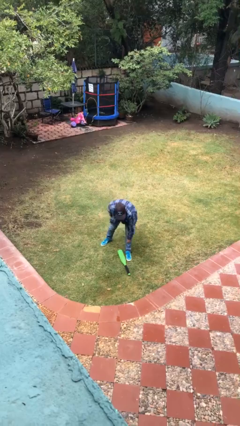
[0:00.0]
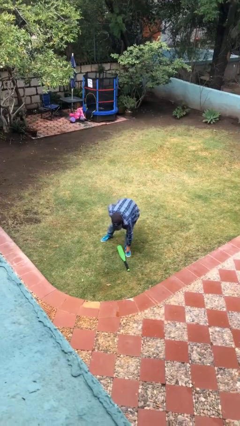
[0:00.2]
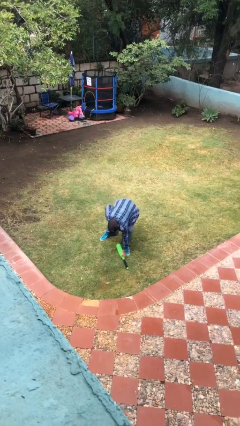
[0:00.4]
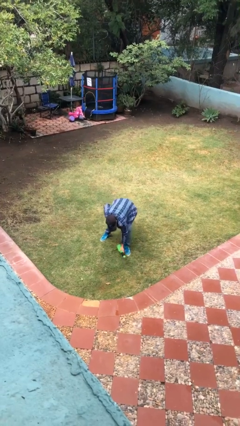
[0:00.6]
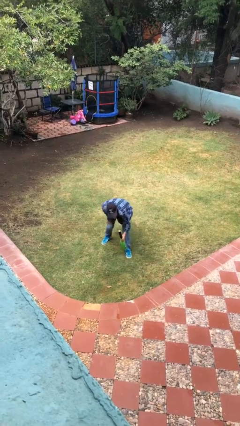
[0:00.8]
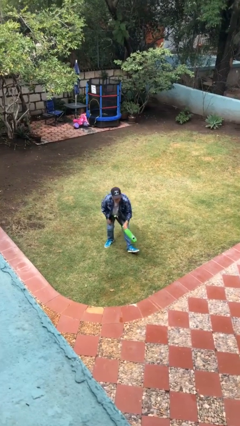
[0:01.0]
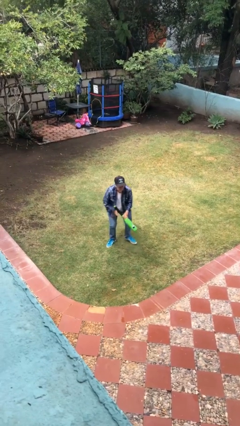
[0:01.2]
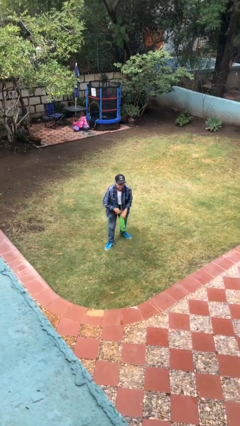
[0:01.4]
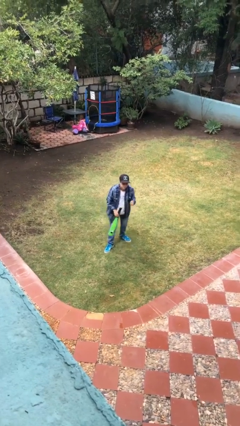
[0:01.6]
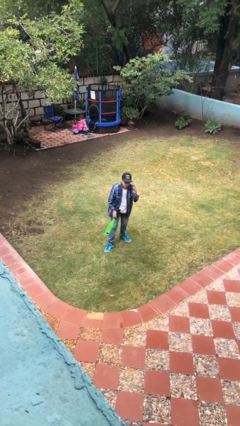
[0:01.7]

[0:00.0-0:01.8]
person picks up object from floor

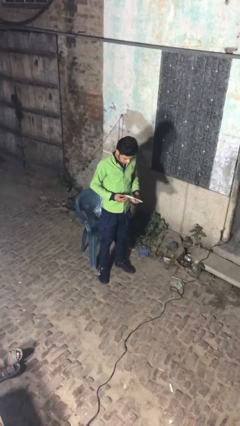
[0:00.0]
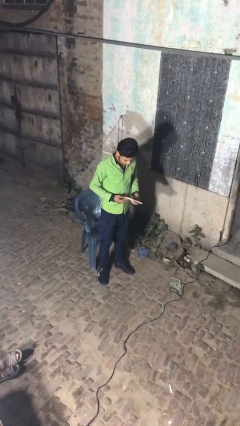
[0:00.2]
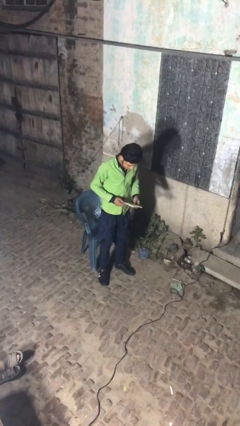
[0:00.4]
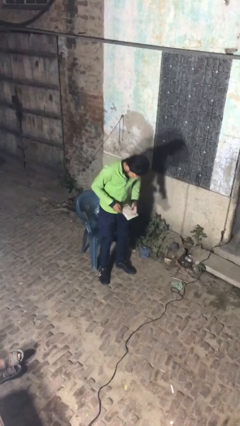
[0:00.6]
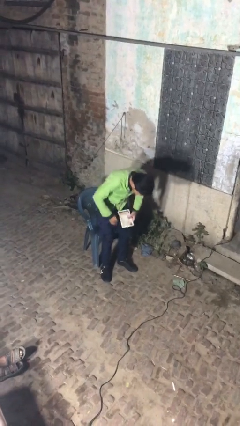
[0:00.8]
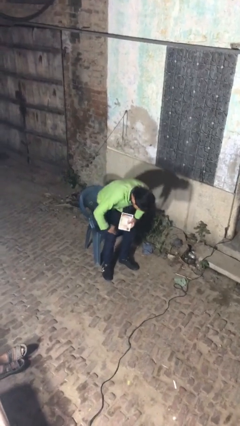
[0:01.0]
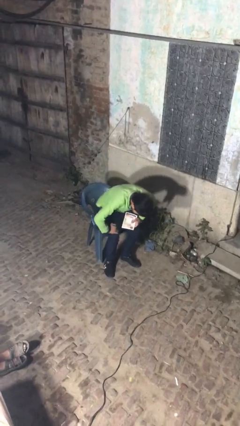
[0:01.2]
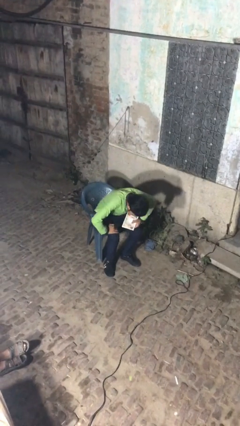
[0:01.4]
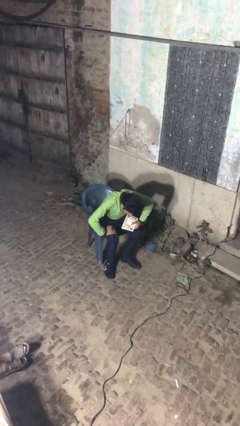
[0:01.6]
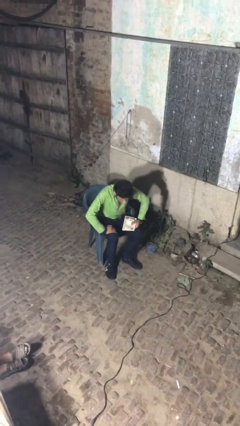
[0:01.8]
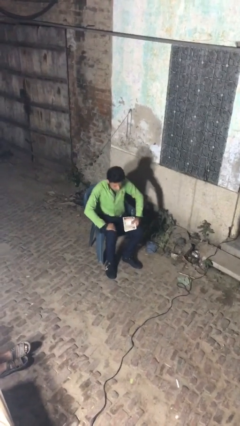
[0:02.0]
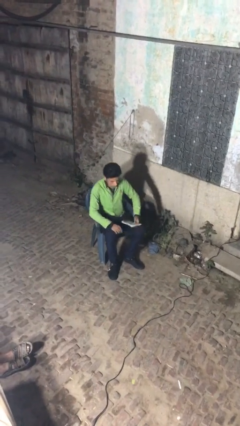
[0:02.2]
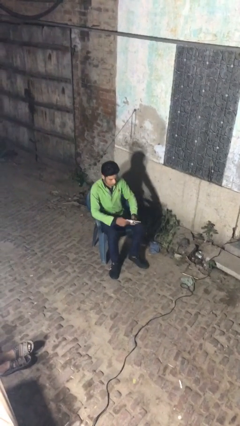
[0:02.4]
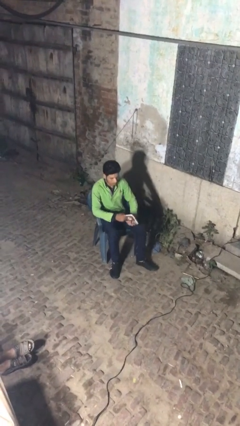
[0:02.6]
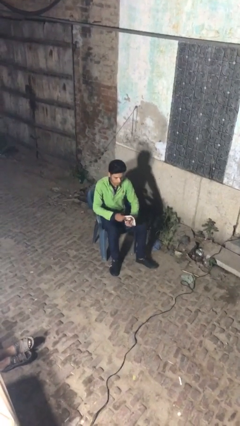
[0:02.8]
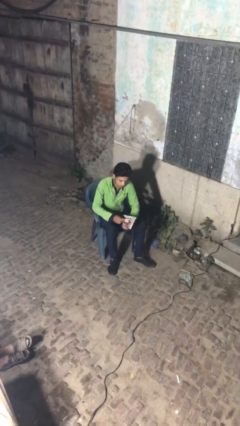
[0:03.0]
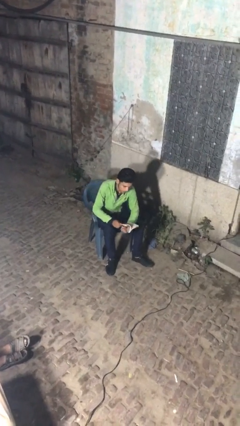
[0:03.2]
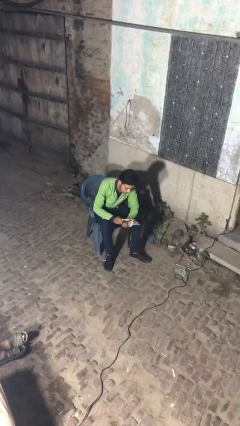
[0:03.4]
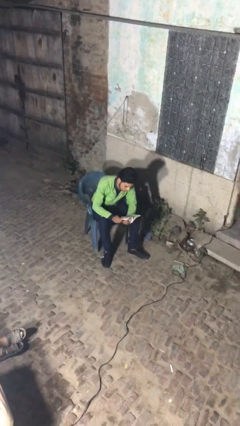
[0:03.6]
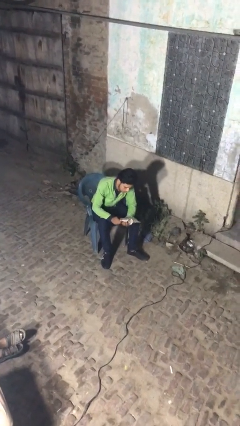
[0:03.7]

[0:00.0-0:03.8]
person sits down

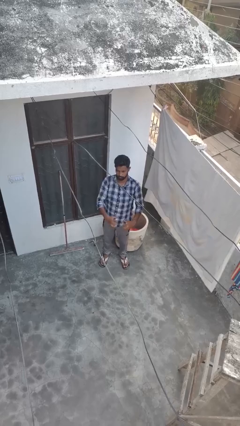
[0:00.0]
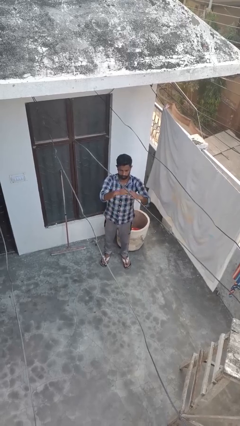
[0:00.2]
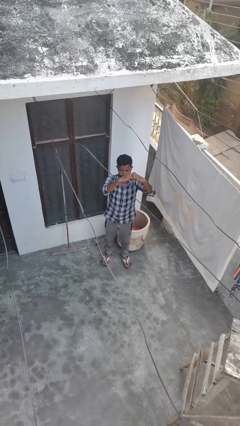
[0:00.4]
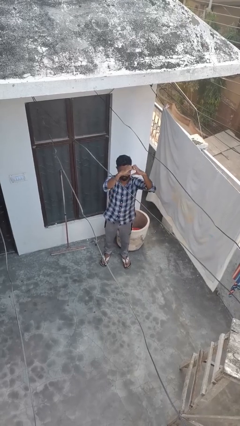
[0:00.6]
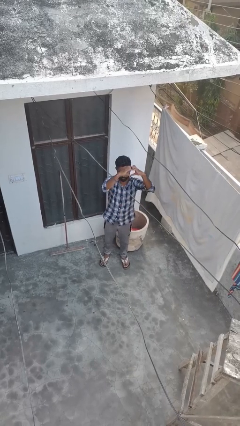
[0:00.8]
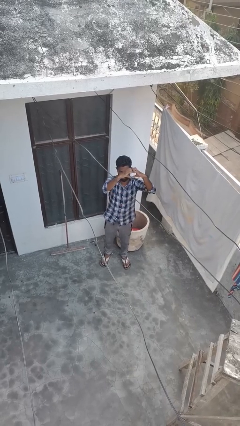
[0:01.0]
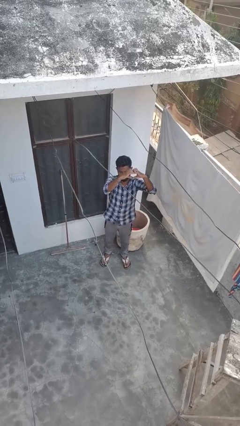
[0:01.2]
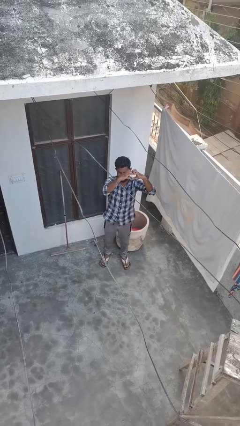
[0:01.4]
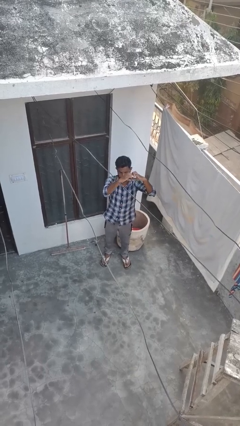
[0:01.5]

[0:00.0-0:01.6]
person gestures heart

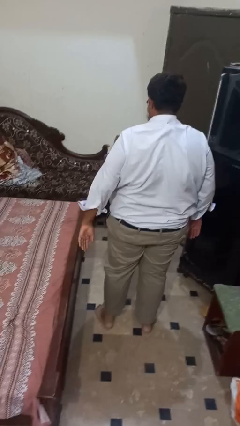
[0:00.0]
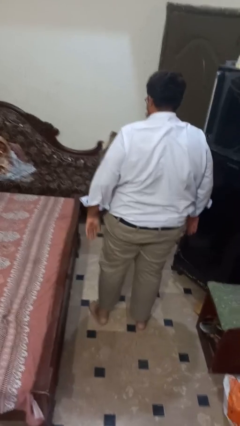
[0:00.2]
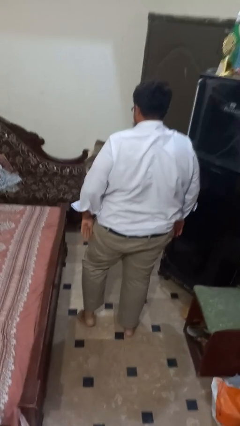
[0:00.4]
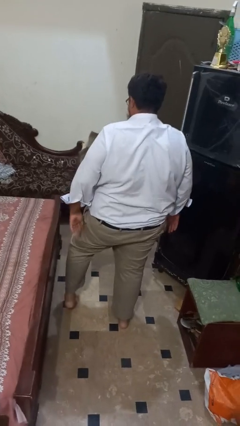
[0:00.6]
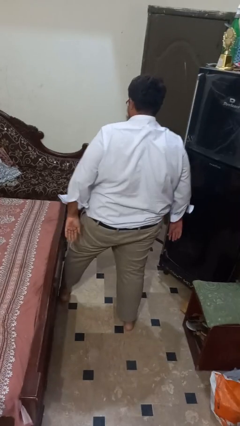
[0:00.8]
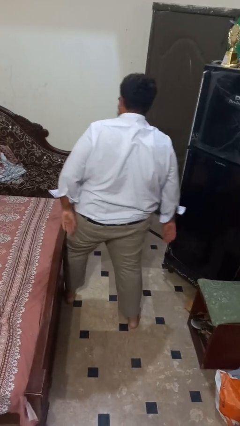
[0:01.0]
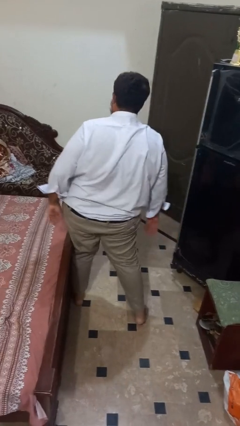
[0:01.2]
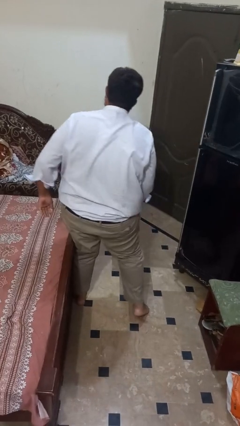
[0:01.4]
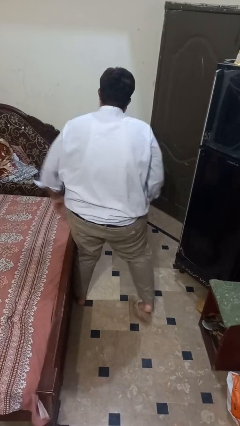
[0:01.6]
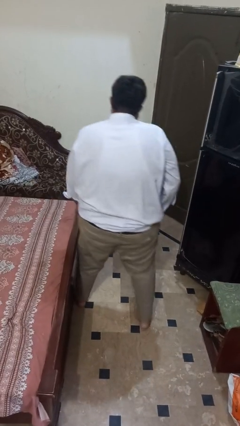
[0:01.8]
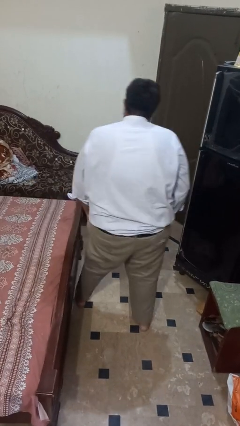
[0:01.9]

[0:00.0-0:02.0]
person trips on object on floor

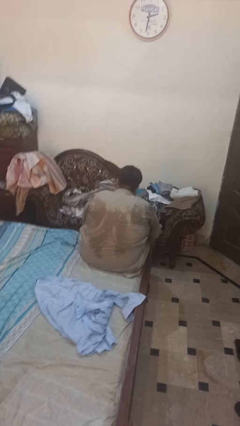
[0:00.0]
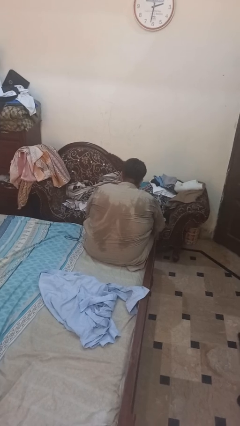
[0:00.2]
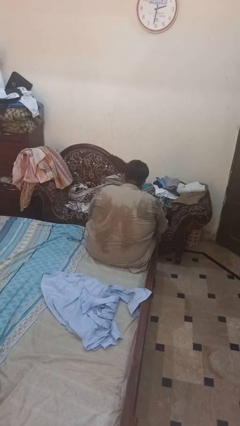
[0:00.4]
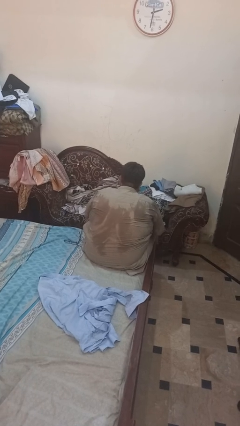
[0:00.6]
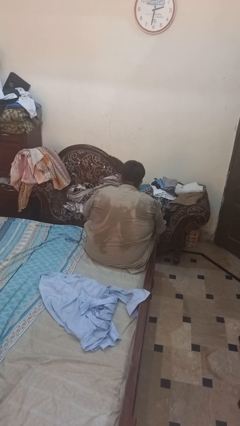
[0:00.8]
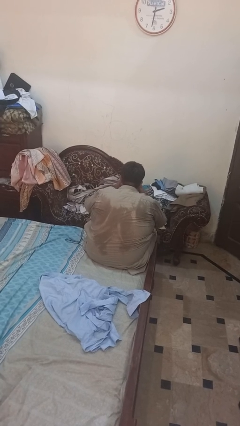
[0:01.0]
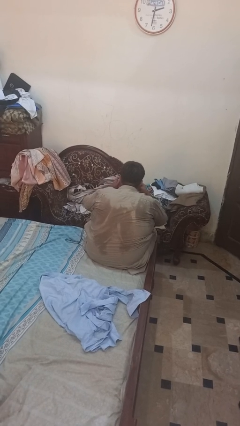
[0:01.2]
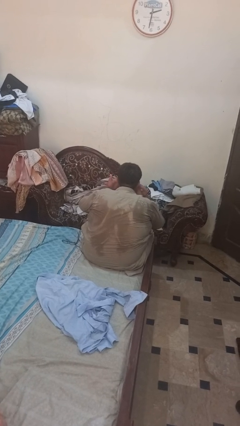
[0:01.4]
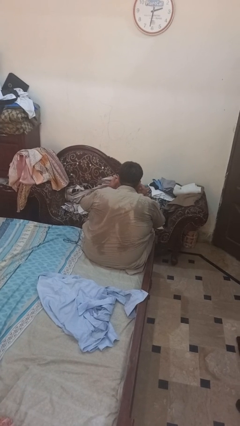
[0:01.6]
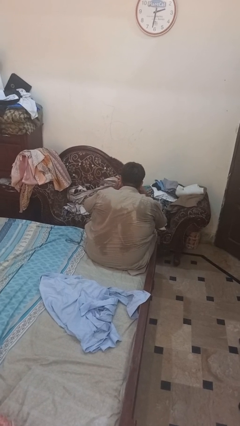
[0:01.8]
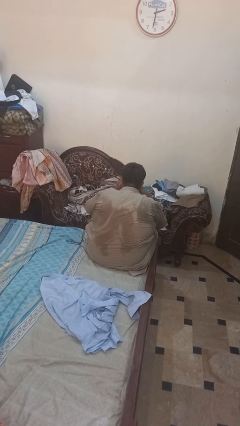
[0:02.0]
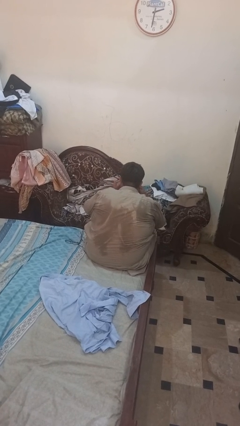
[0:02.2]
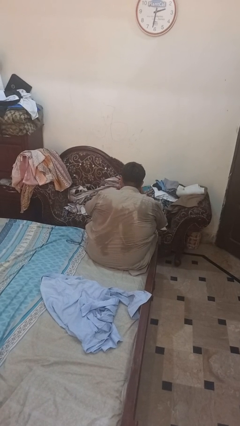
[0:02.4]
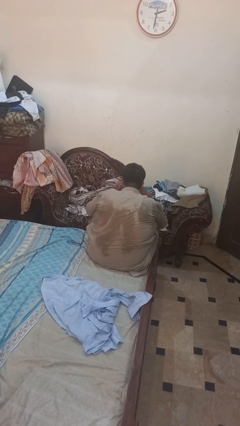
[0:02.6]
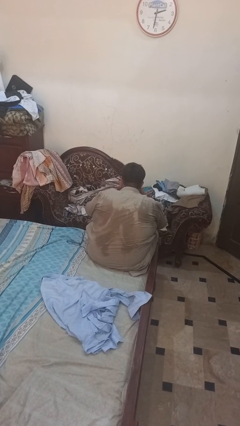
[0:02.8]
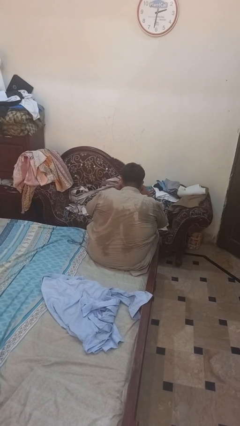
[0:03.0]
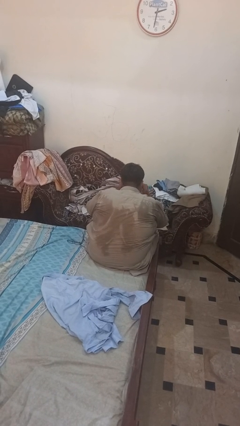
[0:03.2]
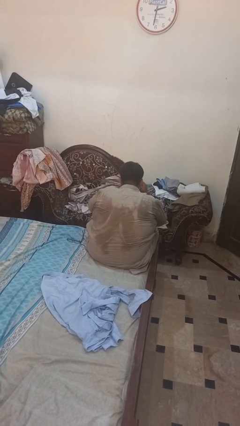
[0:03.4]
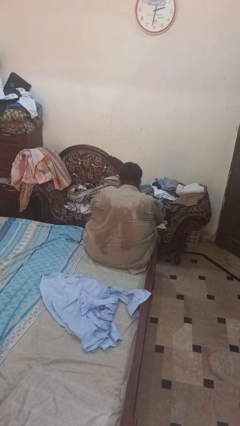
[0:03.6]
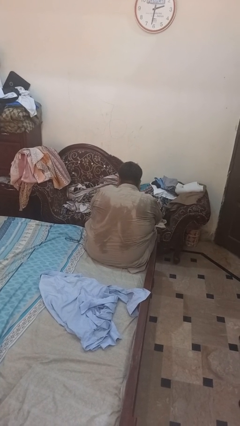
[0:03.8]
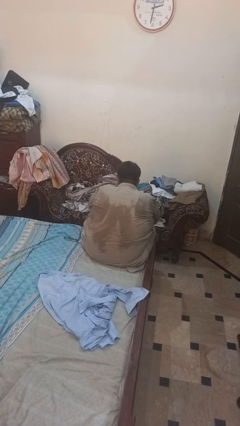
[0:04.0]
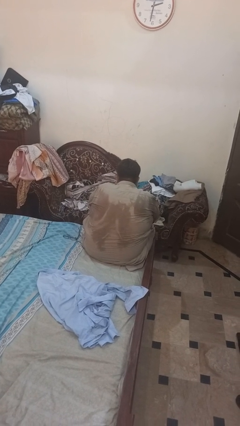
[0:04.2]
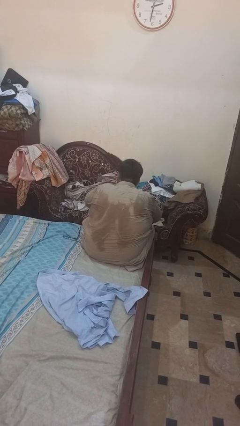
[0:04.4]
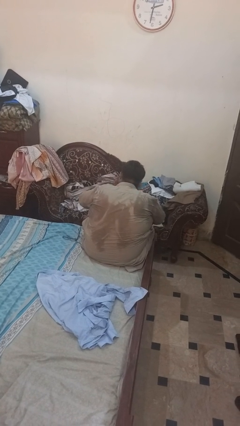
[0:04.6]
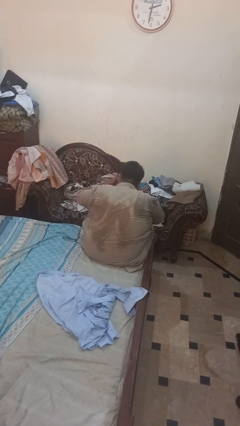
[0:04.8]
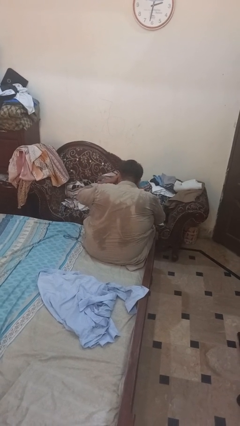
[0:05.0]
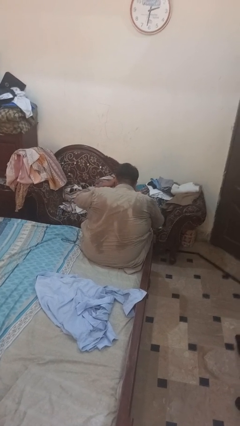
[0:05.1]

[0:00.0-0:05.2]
person rubs eyes

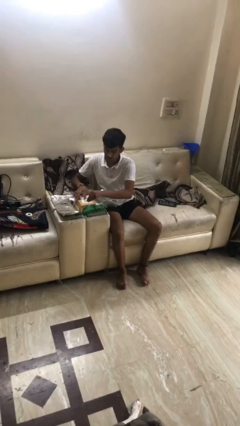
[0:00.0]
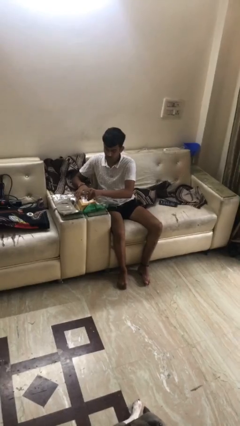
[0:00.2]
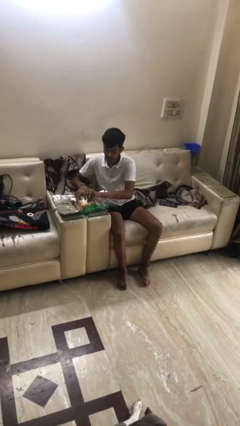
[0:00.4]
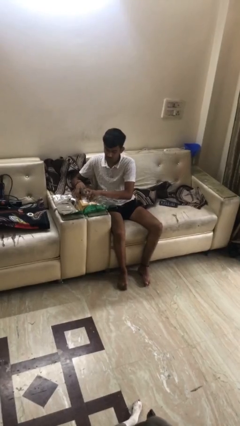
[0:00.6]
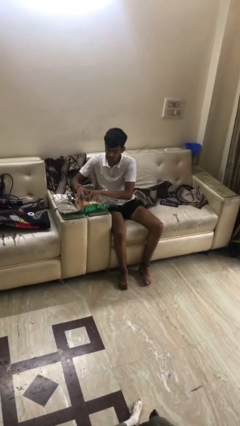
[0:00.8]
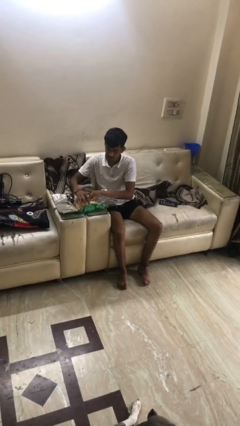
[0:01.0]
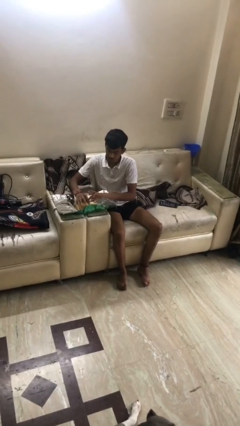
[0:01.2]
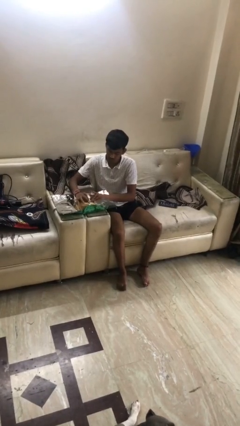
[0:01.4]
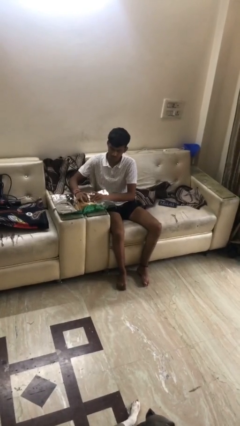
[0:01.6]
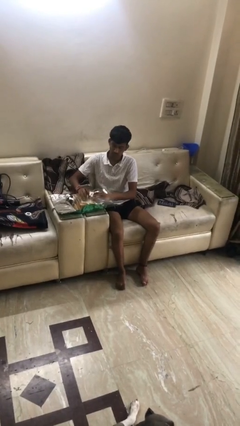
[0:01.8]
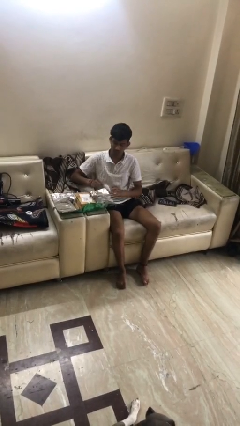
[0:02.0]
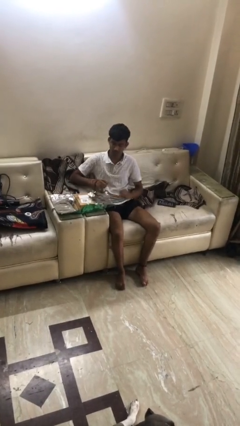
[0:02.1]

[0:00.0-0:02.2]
person wraps box

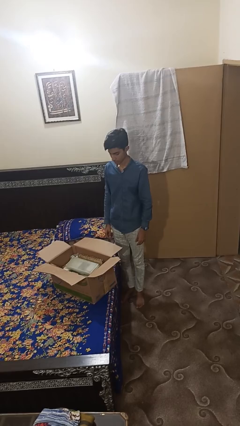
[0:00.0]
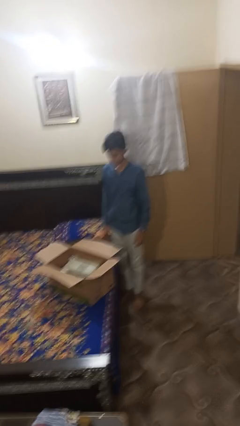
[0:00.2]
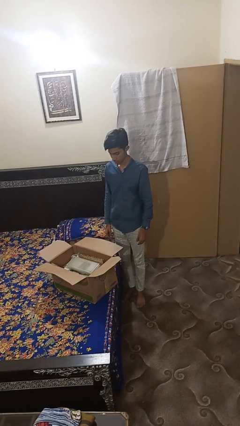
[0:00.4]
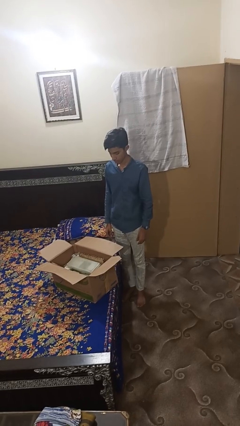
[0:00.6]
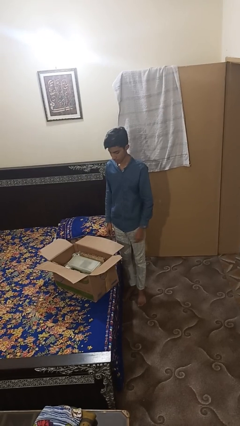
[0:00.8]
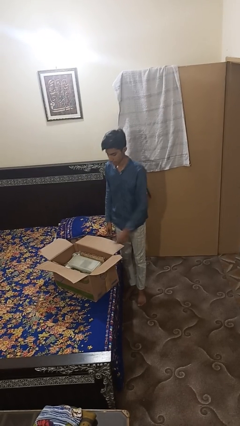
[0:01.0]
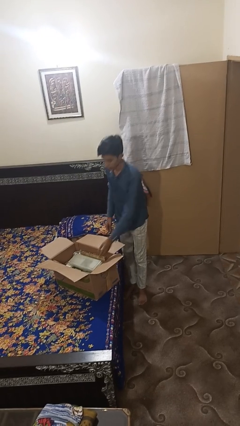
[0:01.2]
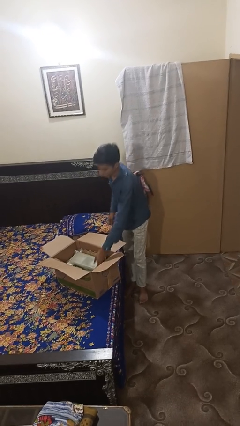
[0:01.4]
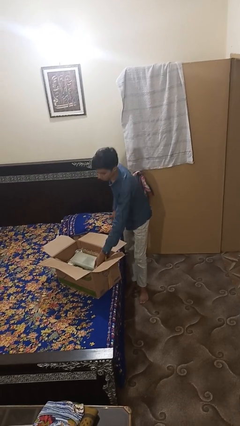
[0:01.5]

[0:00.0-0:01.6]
person takes object from box
